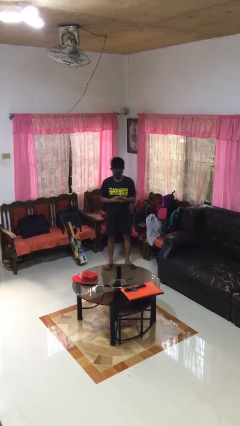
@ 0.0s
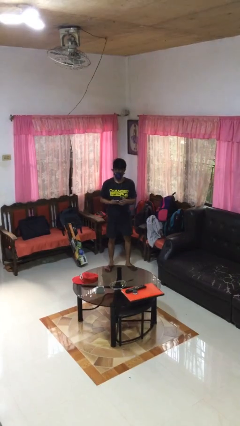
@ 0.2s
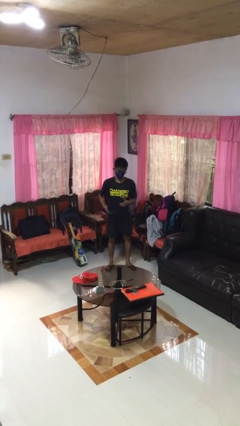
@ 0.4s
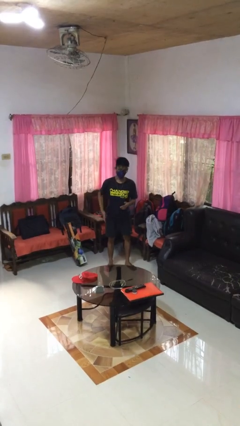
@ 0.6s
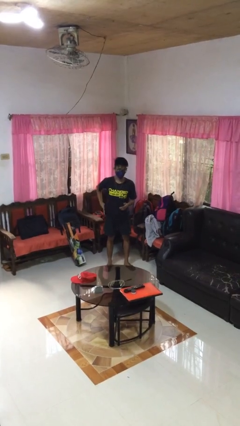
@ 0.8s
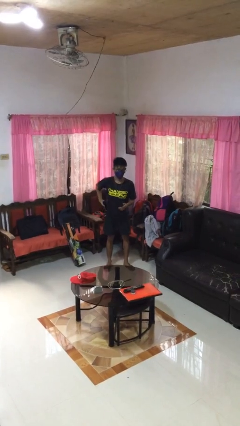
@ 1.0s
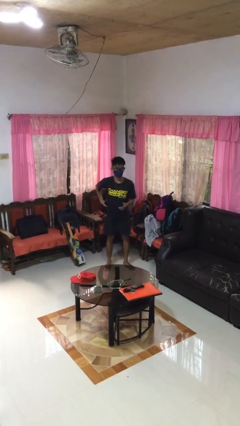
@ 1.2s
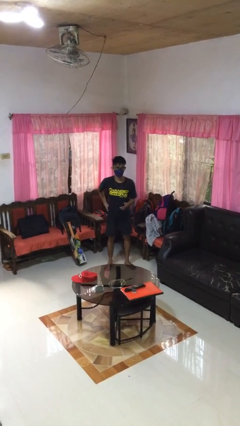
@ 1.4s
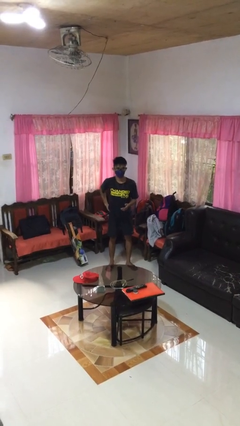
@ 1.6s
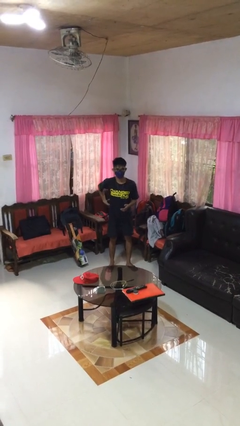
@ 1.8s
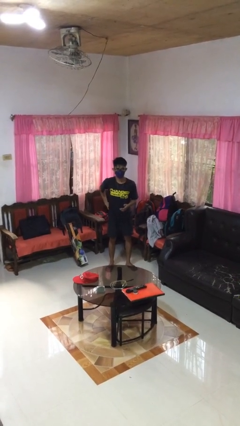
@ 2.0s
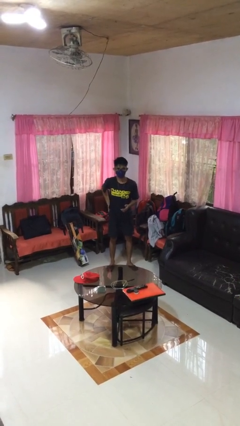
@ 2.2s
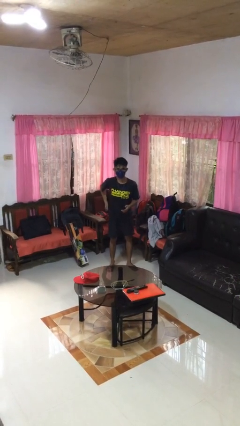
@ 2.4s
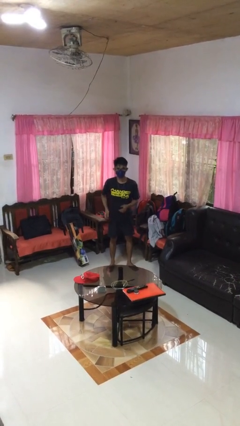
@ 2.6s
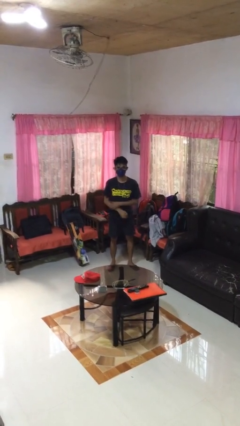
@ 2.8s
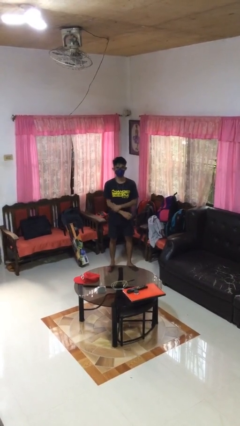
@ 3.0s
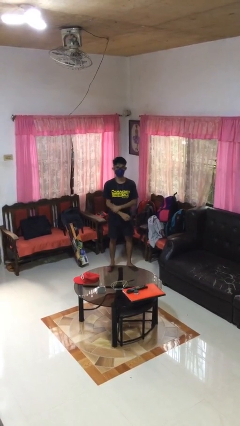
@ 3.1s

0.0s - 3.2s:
person puts phone into pocket

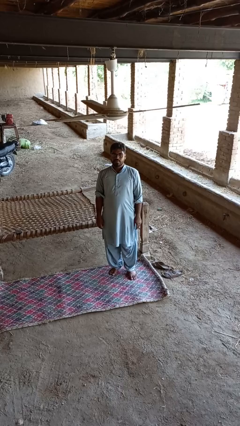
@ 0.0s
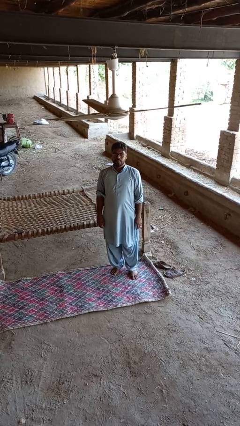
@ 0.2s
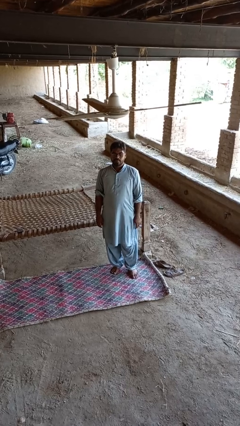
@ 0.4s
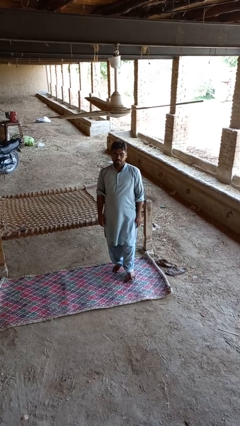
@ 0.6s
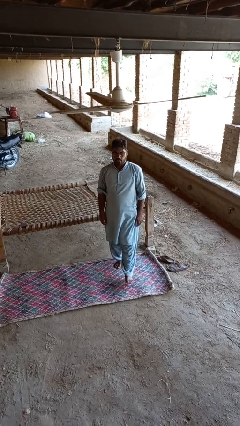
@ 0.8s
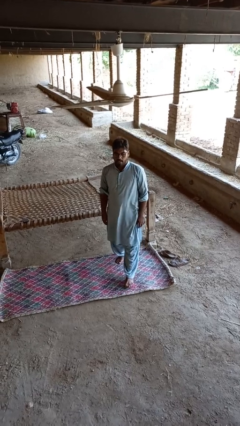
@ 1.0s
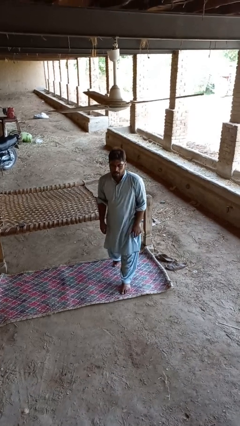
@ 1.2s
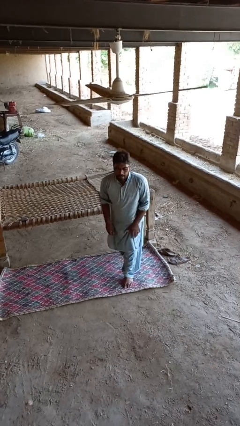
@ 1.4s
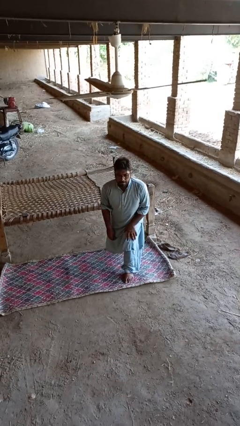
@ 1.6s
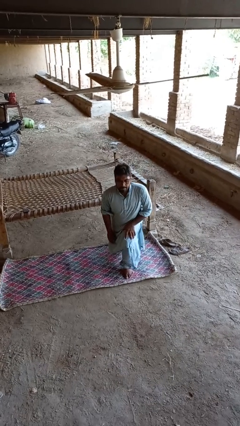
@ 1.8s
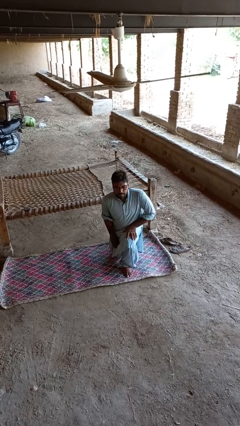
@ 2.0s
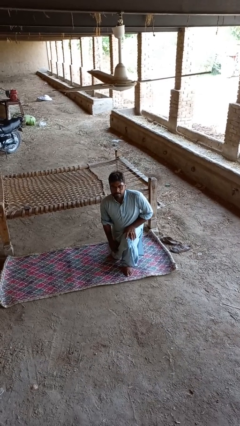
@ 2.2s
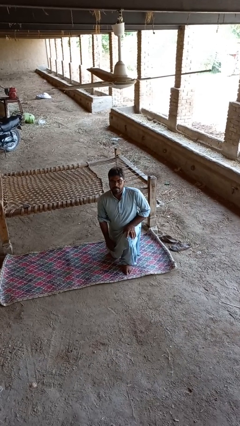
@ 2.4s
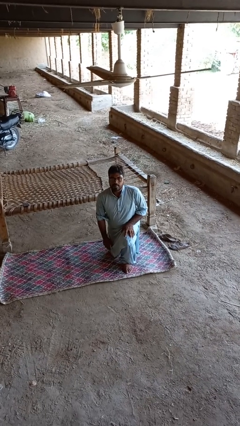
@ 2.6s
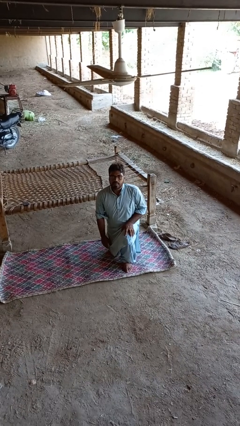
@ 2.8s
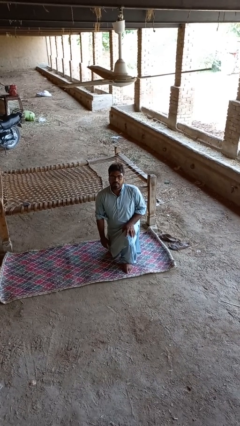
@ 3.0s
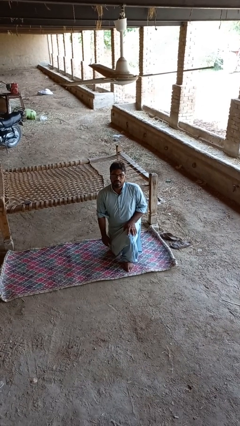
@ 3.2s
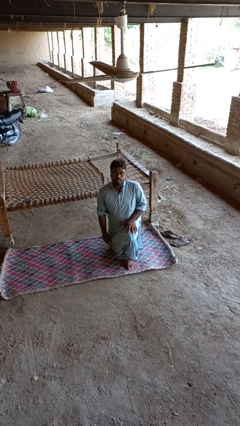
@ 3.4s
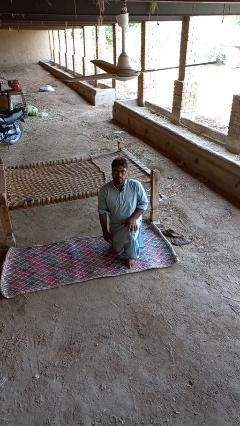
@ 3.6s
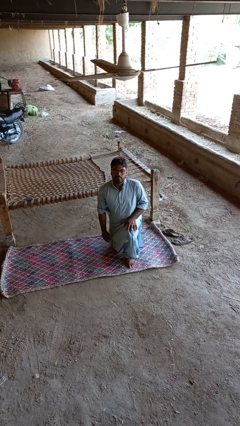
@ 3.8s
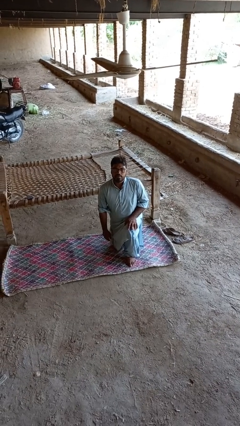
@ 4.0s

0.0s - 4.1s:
person kneels

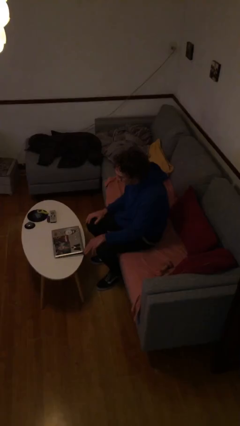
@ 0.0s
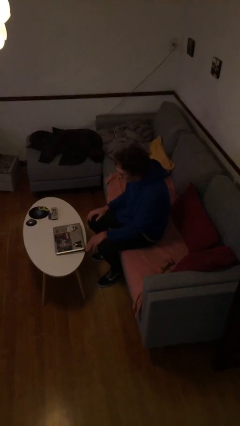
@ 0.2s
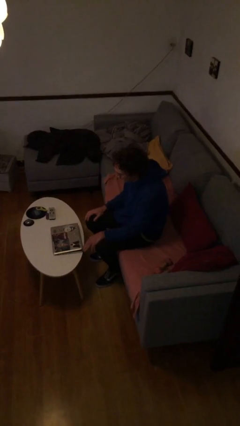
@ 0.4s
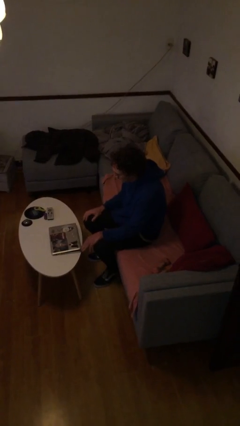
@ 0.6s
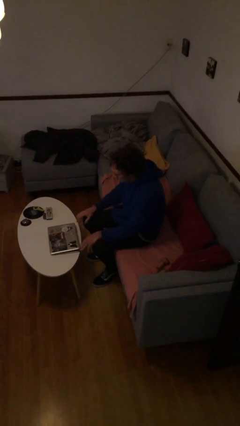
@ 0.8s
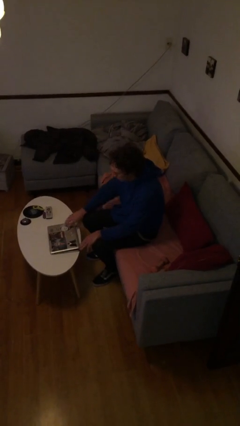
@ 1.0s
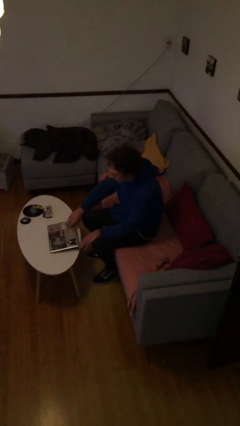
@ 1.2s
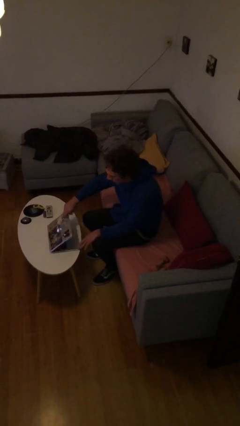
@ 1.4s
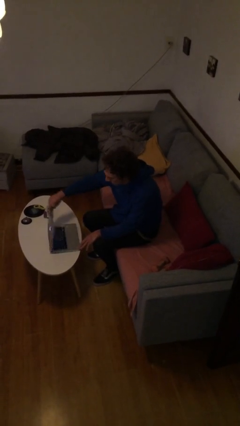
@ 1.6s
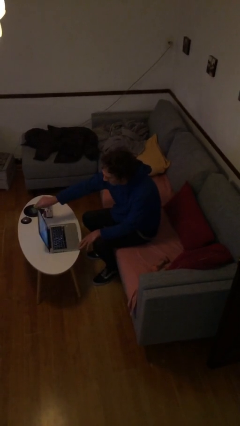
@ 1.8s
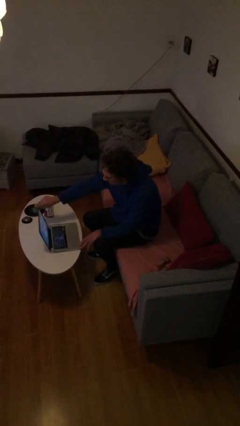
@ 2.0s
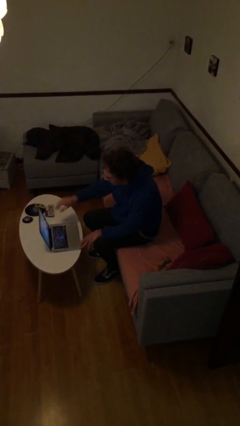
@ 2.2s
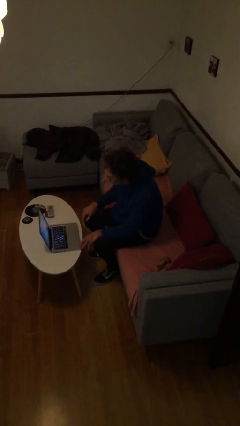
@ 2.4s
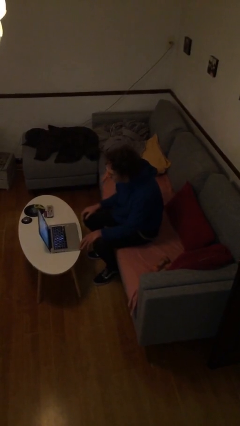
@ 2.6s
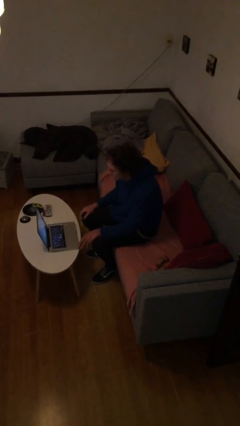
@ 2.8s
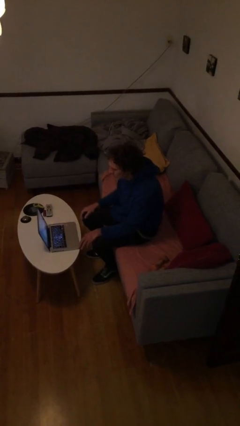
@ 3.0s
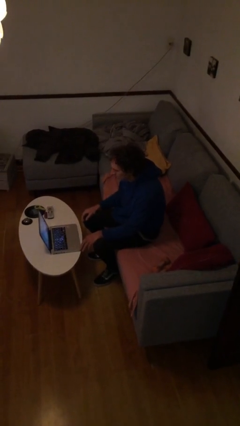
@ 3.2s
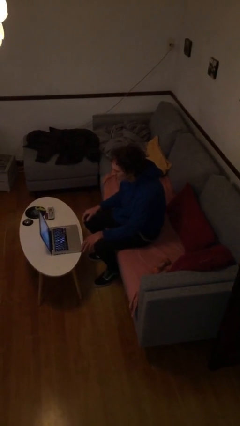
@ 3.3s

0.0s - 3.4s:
person opens laptop

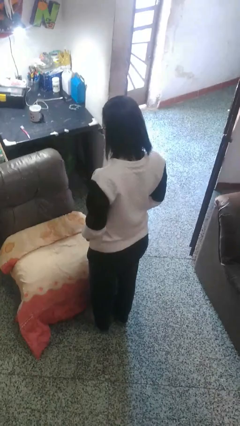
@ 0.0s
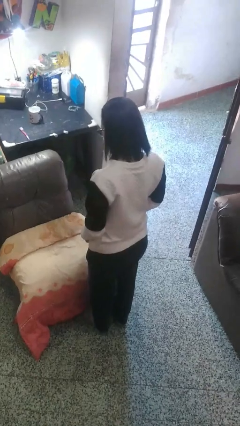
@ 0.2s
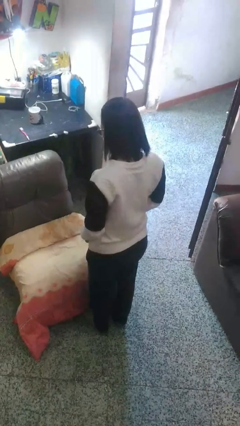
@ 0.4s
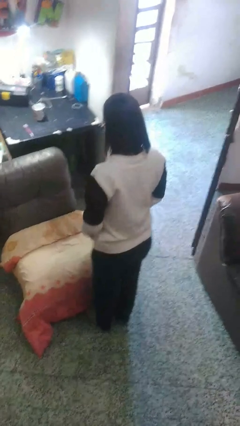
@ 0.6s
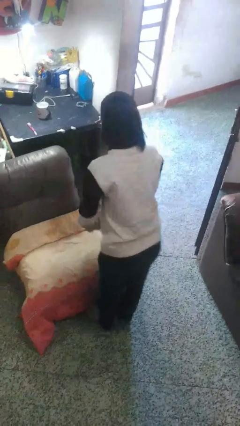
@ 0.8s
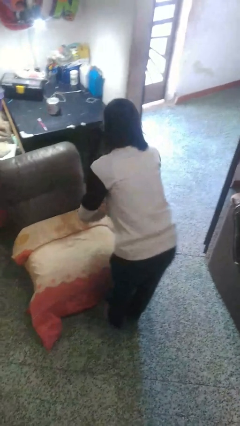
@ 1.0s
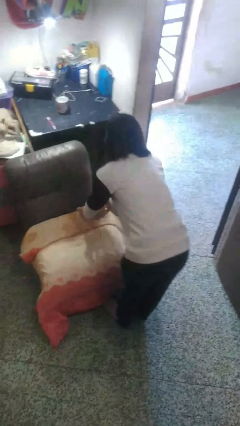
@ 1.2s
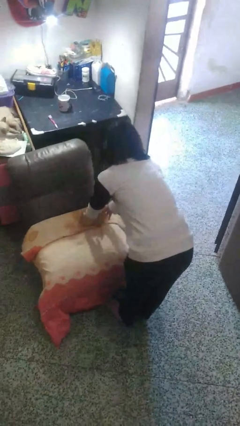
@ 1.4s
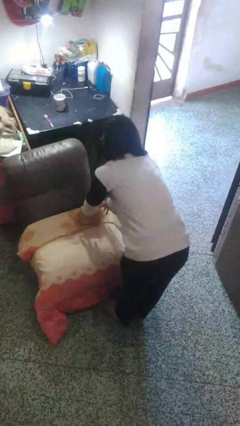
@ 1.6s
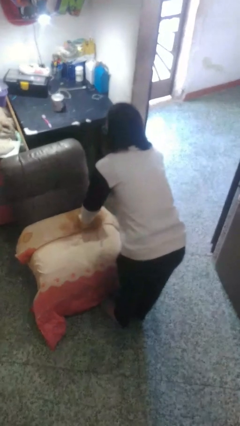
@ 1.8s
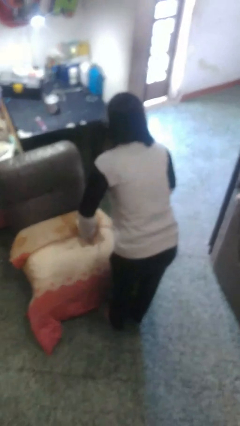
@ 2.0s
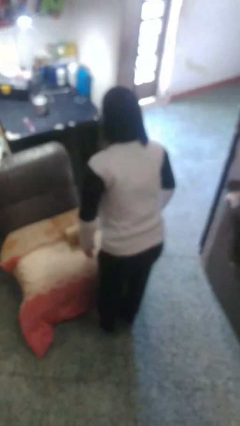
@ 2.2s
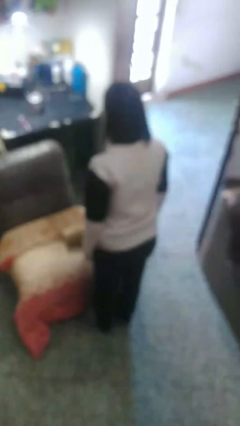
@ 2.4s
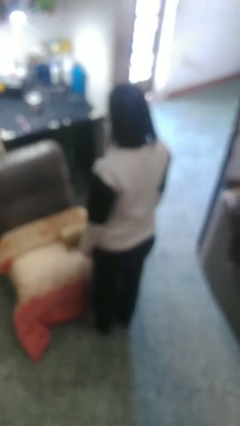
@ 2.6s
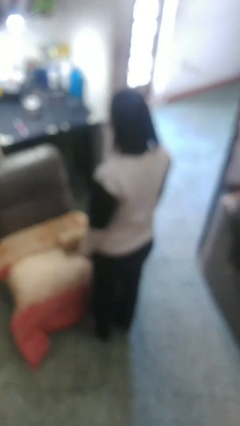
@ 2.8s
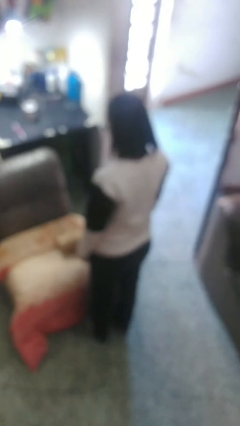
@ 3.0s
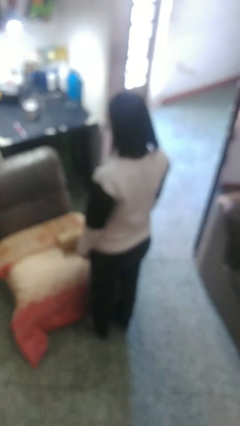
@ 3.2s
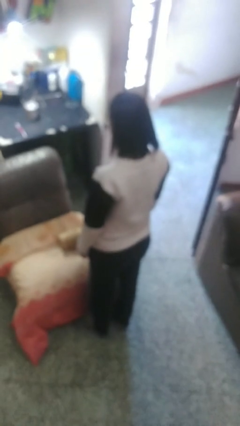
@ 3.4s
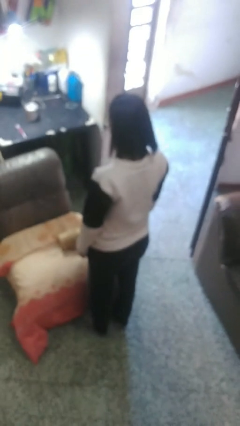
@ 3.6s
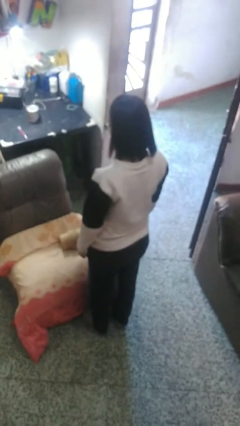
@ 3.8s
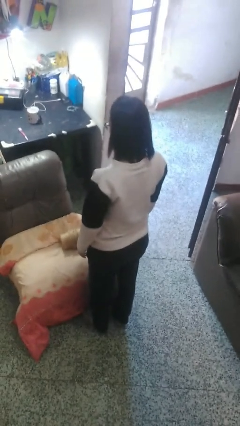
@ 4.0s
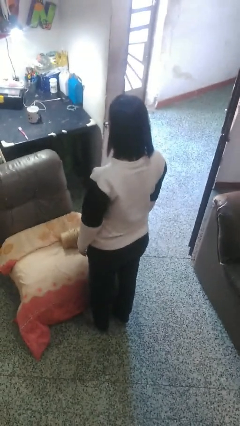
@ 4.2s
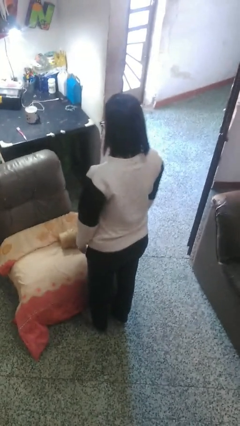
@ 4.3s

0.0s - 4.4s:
person puts down object on couch

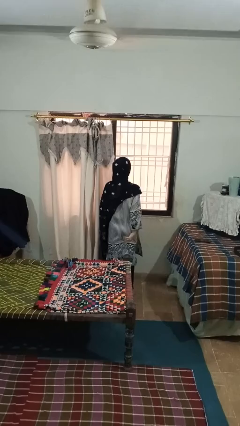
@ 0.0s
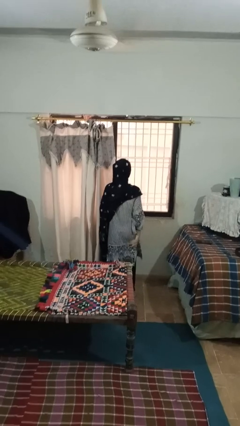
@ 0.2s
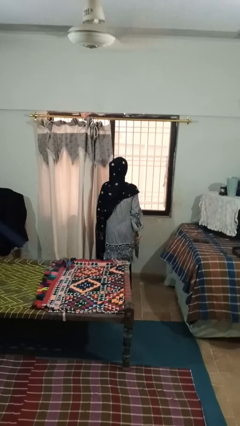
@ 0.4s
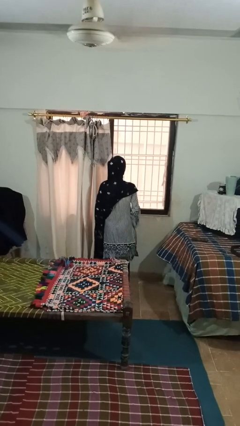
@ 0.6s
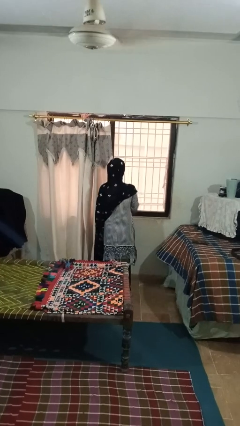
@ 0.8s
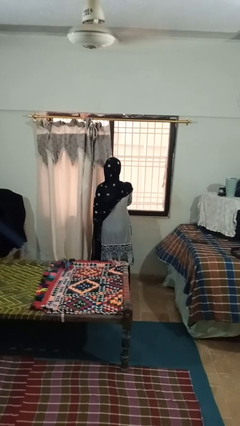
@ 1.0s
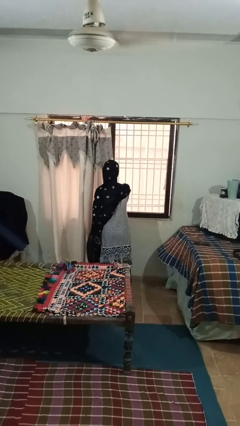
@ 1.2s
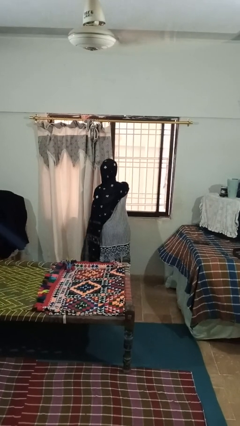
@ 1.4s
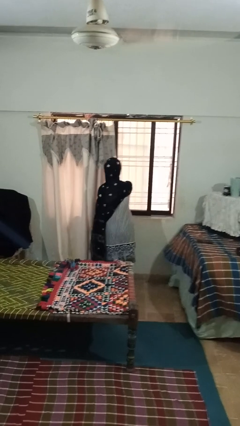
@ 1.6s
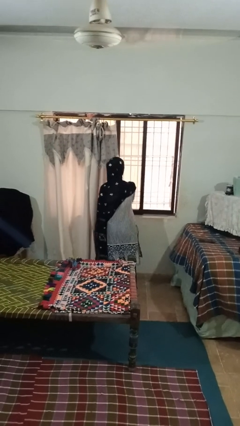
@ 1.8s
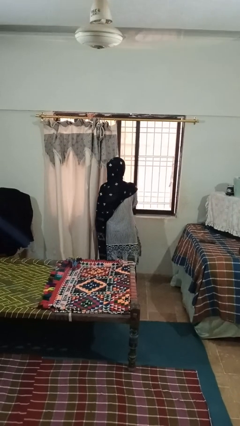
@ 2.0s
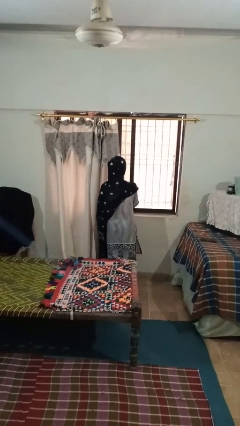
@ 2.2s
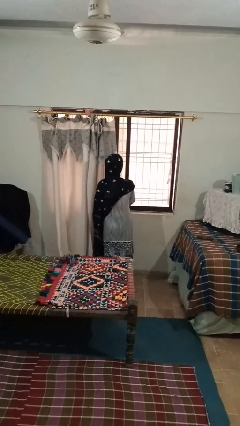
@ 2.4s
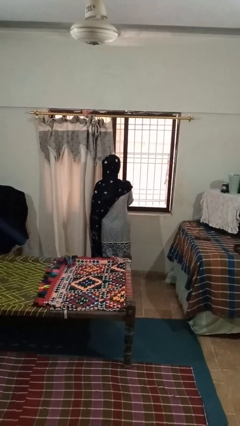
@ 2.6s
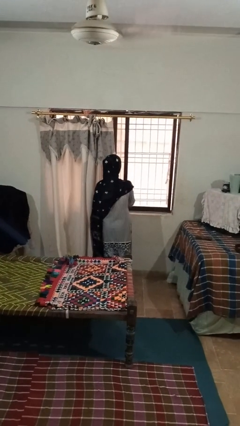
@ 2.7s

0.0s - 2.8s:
person opens home window
